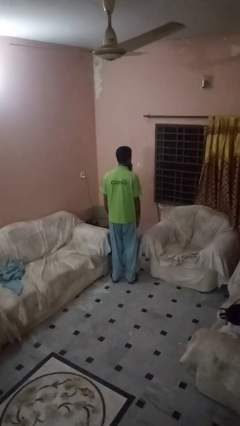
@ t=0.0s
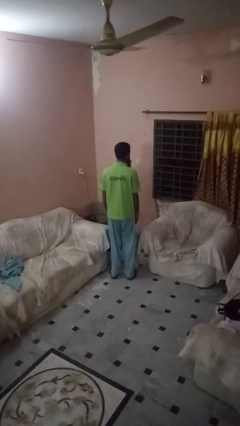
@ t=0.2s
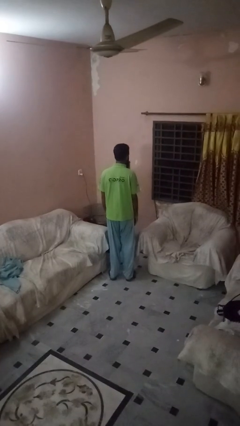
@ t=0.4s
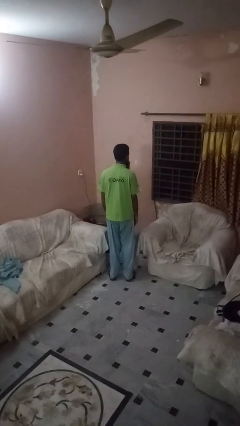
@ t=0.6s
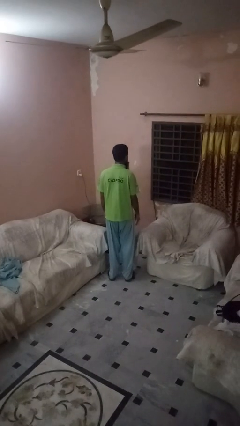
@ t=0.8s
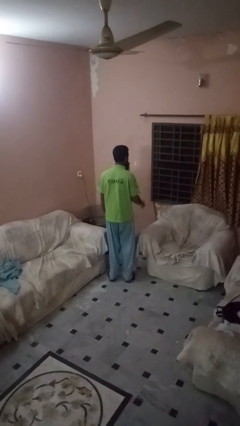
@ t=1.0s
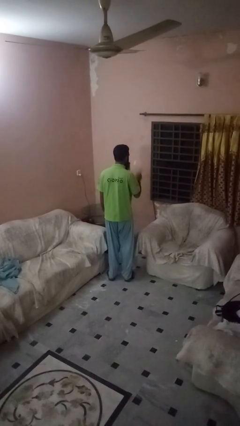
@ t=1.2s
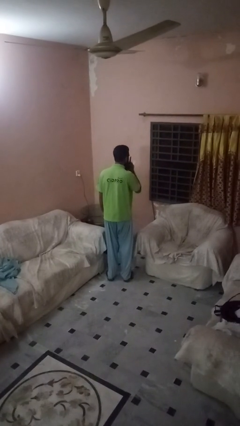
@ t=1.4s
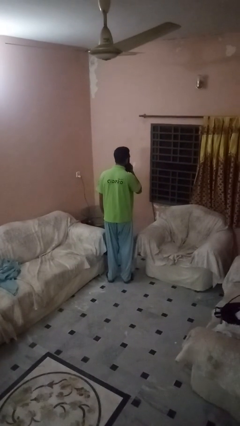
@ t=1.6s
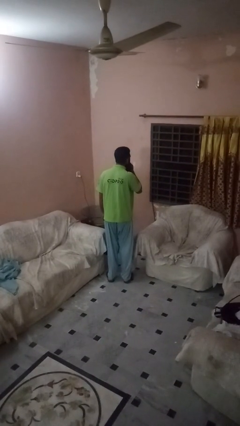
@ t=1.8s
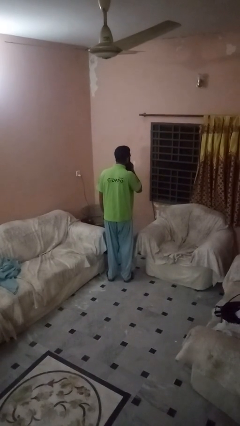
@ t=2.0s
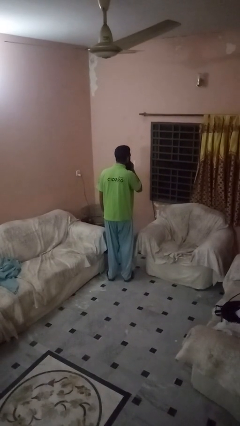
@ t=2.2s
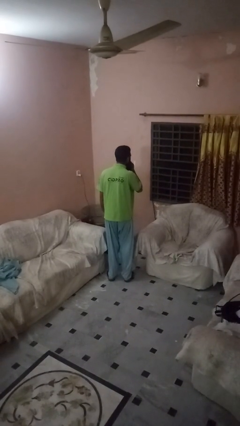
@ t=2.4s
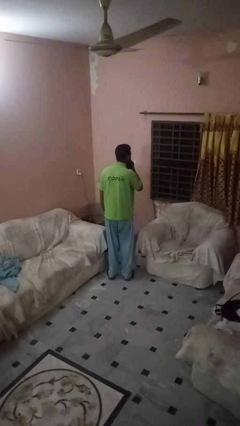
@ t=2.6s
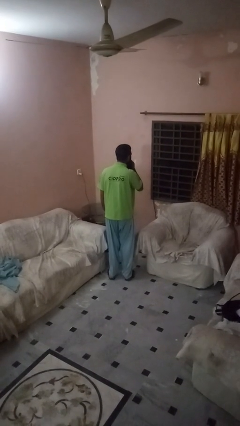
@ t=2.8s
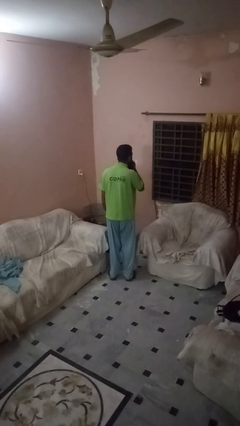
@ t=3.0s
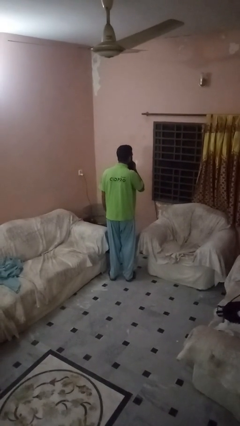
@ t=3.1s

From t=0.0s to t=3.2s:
person gestures be quiet

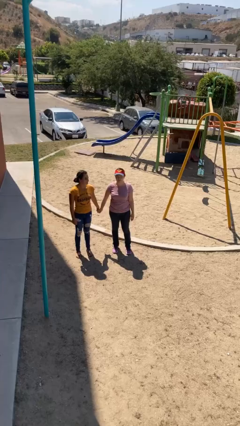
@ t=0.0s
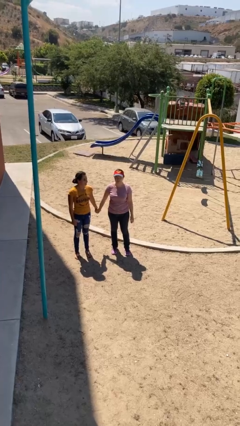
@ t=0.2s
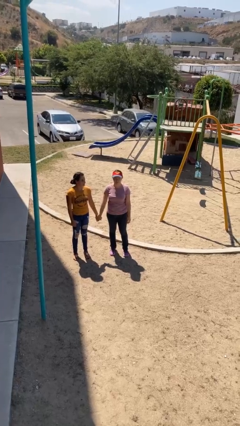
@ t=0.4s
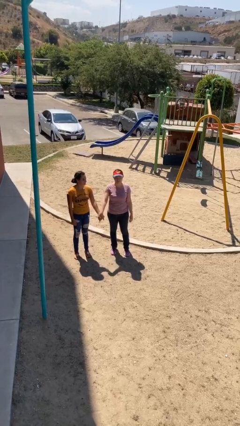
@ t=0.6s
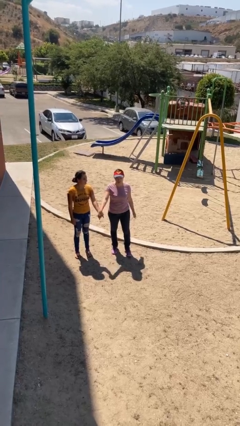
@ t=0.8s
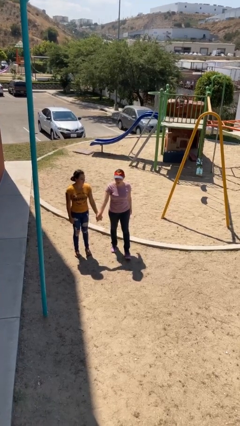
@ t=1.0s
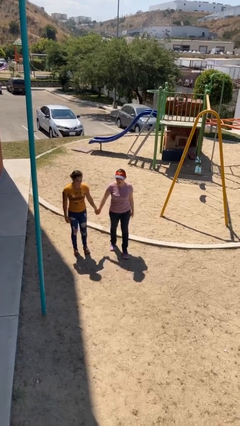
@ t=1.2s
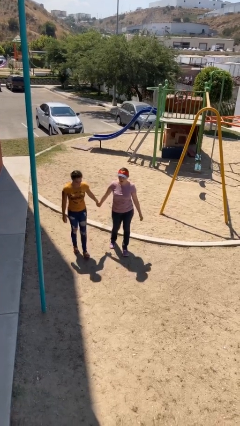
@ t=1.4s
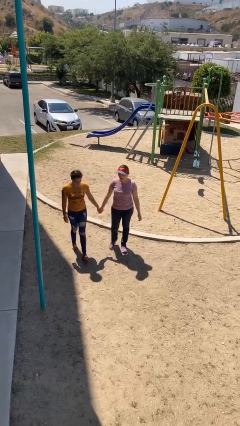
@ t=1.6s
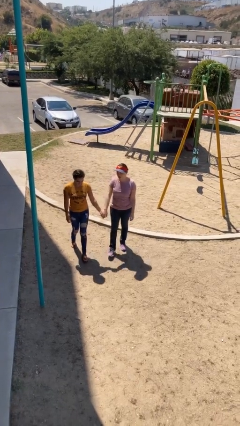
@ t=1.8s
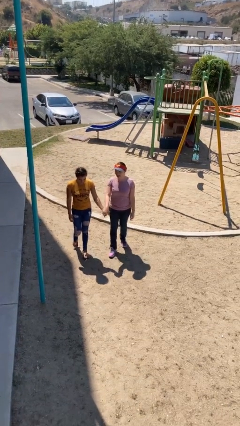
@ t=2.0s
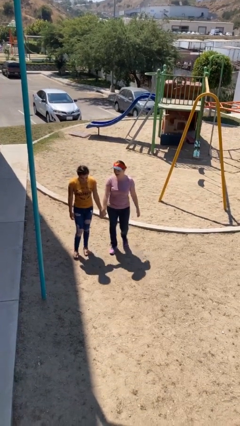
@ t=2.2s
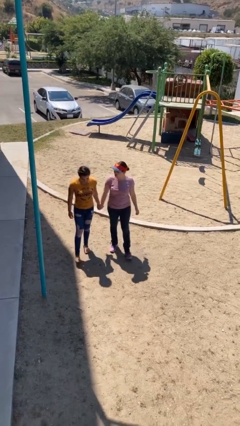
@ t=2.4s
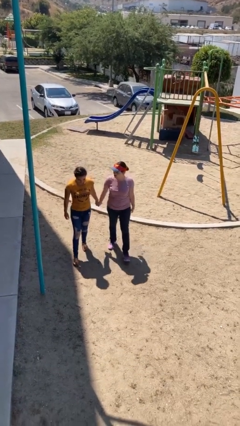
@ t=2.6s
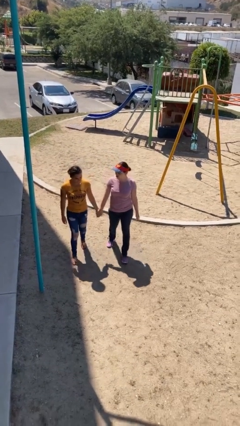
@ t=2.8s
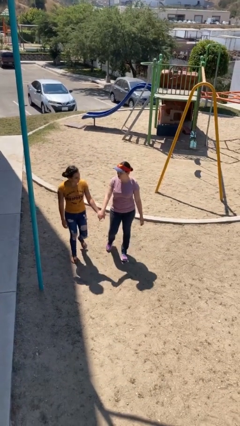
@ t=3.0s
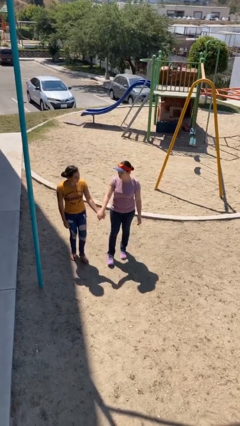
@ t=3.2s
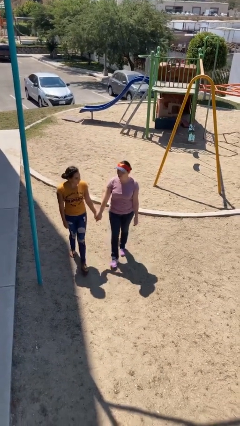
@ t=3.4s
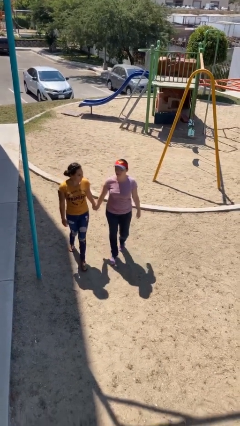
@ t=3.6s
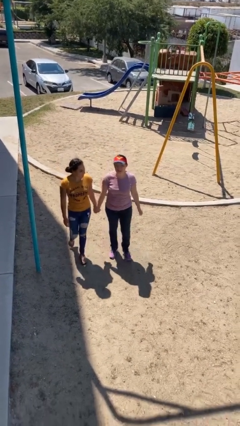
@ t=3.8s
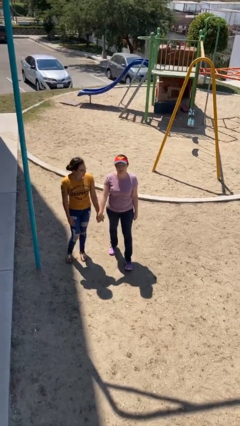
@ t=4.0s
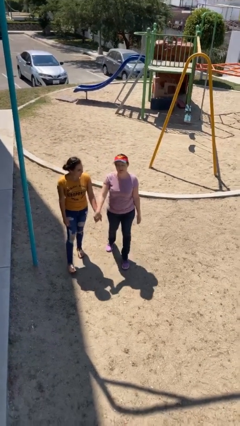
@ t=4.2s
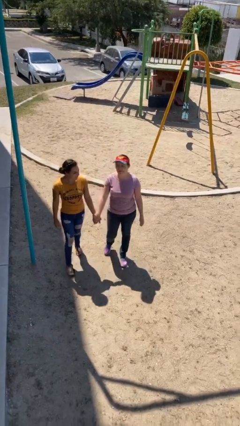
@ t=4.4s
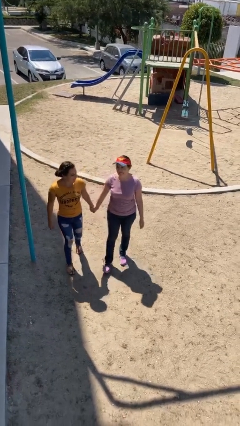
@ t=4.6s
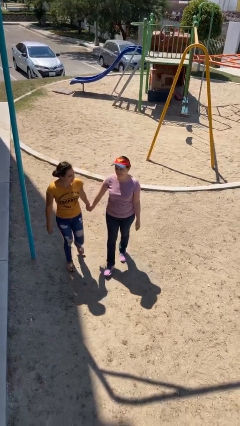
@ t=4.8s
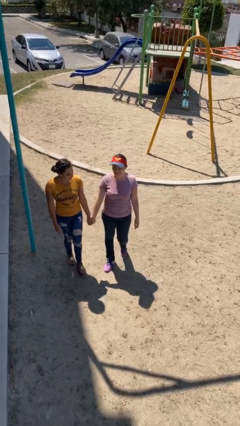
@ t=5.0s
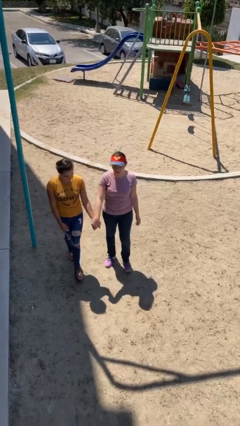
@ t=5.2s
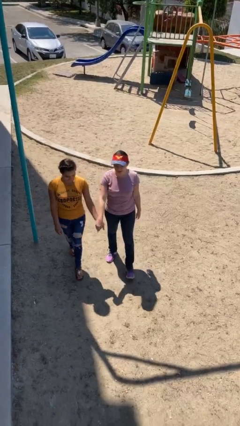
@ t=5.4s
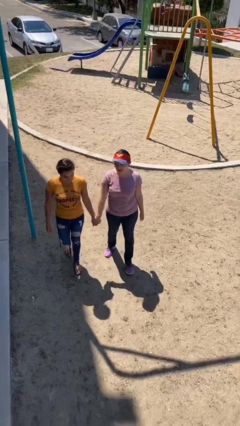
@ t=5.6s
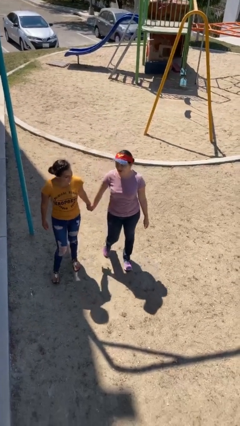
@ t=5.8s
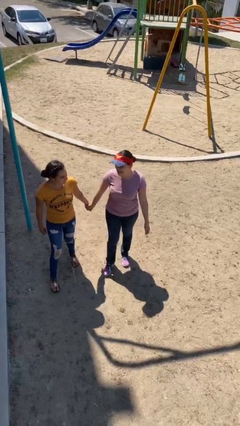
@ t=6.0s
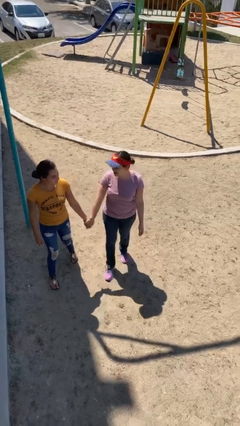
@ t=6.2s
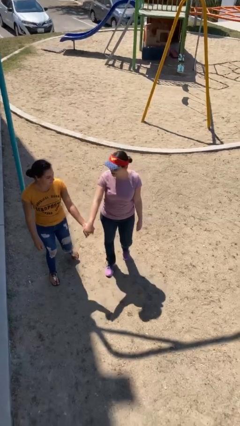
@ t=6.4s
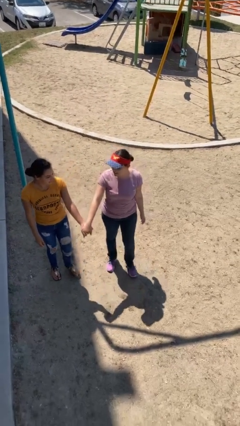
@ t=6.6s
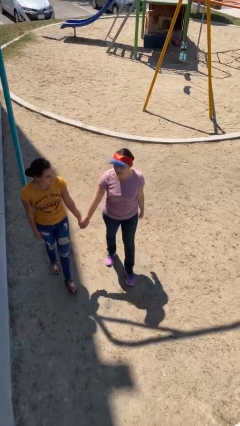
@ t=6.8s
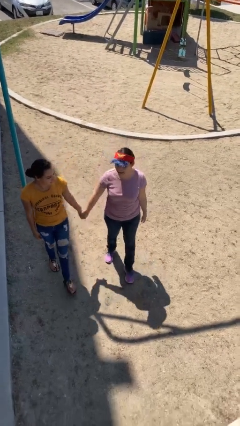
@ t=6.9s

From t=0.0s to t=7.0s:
person holds hand

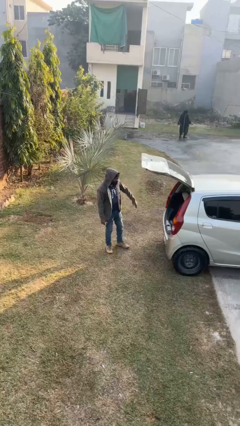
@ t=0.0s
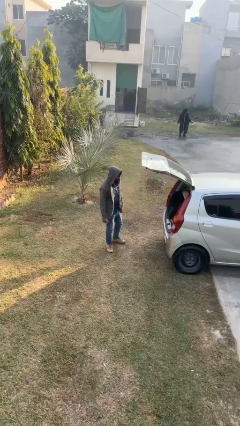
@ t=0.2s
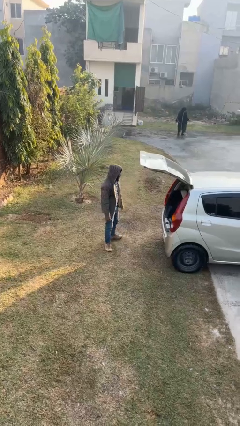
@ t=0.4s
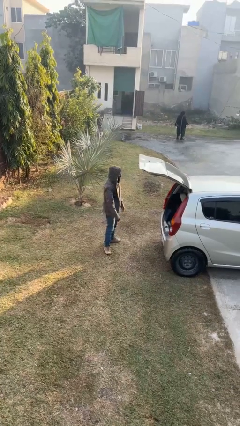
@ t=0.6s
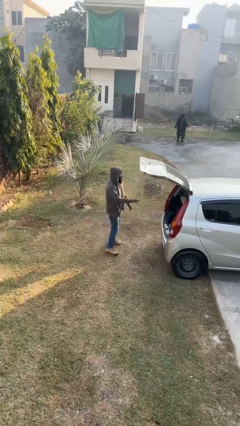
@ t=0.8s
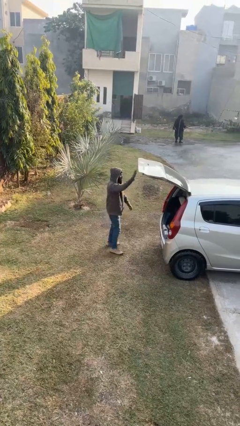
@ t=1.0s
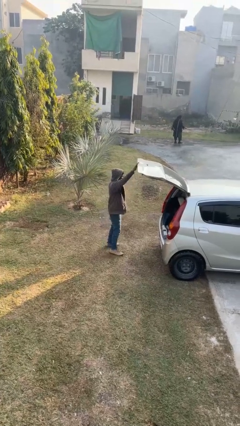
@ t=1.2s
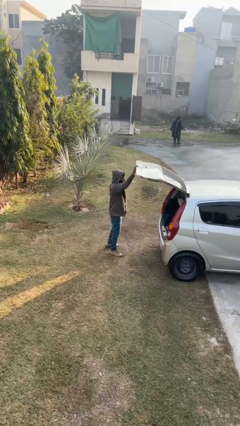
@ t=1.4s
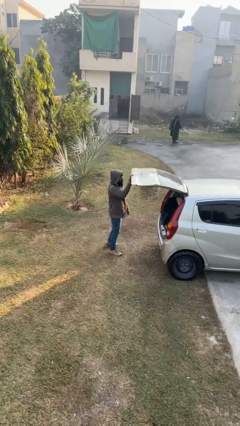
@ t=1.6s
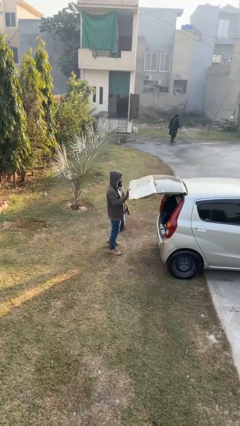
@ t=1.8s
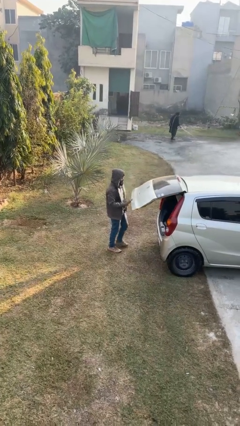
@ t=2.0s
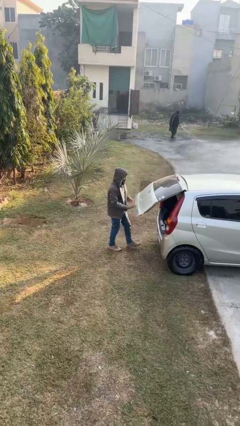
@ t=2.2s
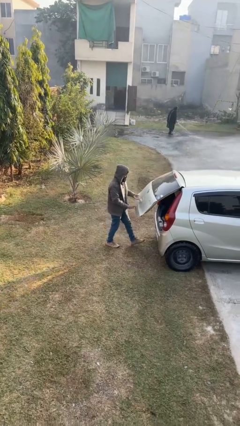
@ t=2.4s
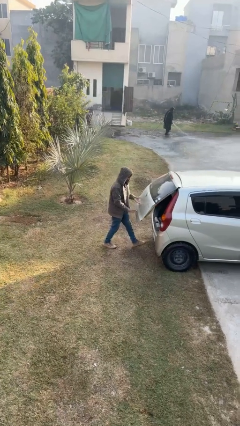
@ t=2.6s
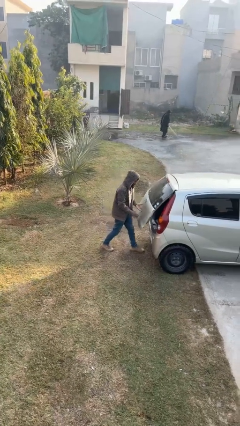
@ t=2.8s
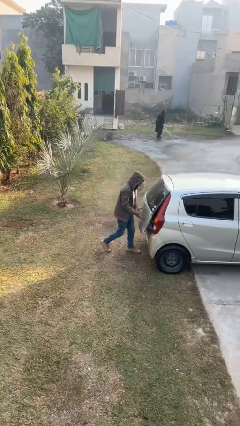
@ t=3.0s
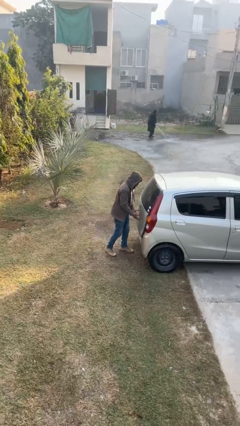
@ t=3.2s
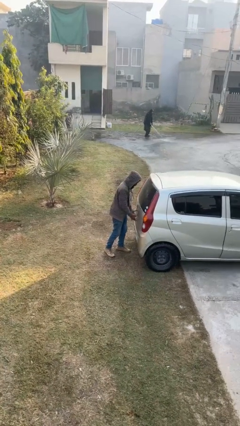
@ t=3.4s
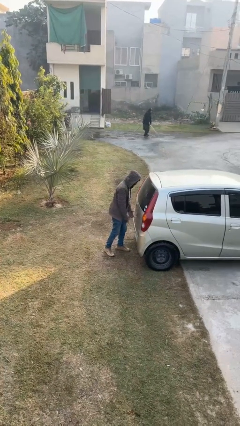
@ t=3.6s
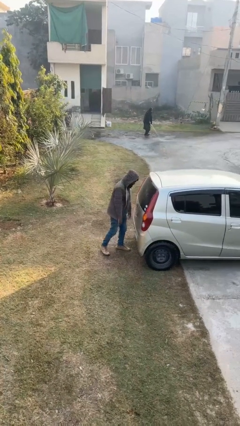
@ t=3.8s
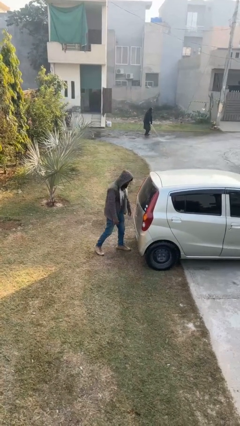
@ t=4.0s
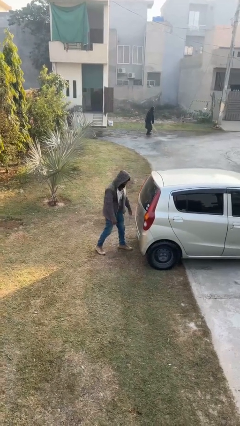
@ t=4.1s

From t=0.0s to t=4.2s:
person closes car trunk

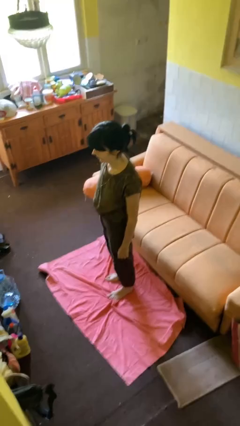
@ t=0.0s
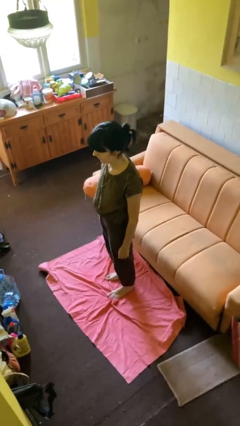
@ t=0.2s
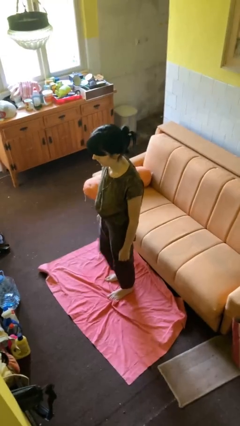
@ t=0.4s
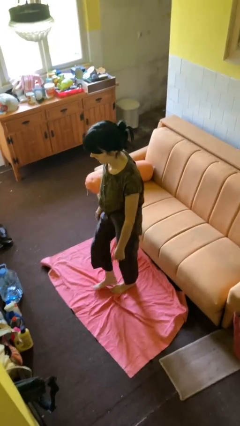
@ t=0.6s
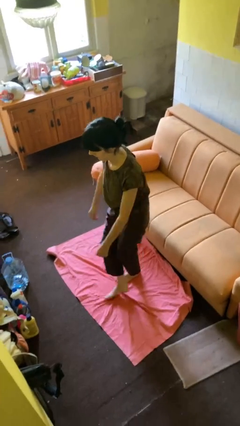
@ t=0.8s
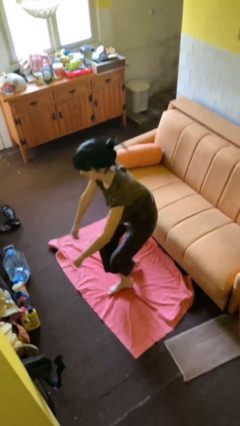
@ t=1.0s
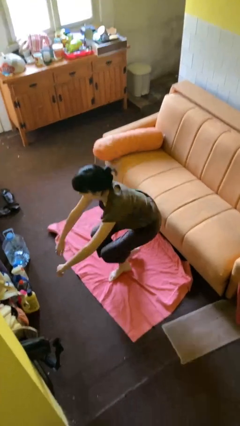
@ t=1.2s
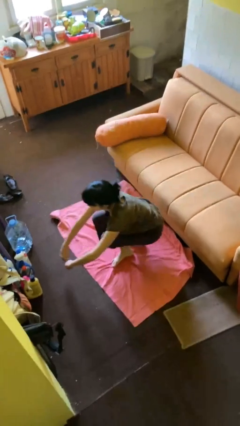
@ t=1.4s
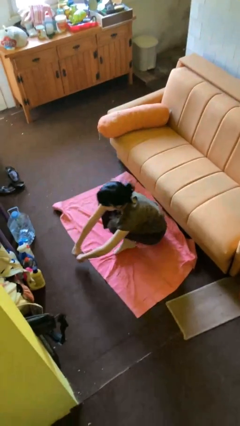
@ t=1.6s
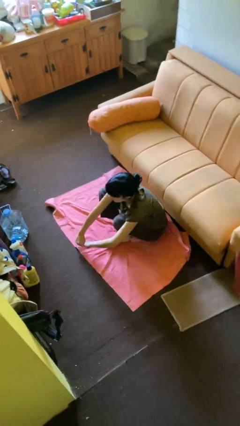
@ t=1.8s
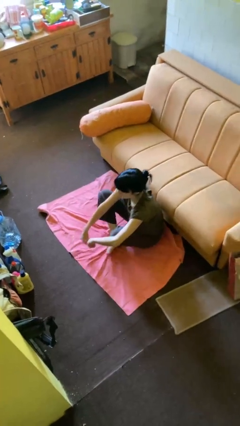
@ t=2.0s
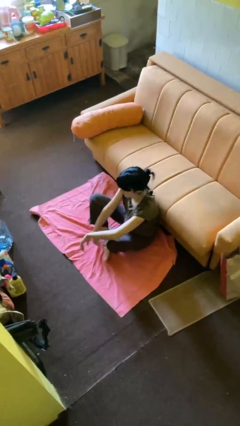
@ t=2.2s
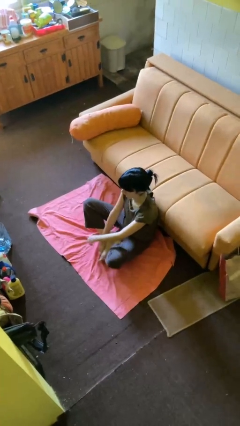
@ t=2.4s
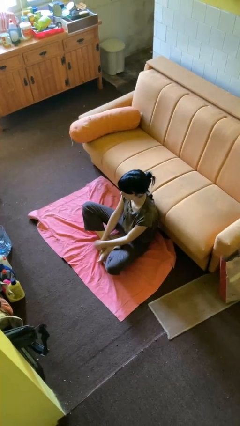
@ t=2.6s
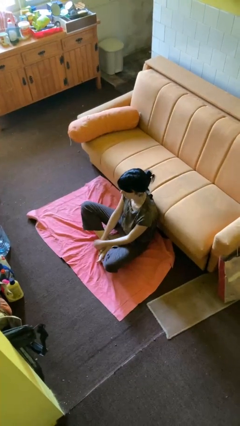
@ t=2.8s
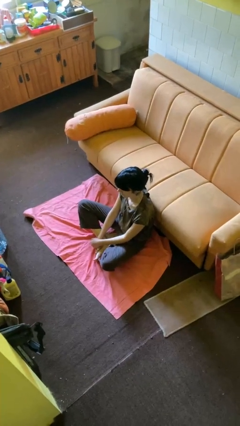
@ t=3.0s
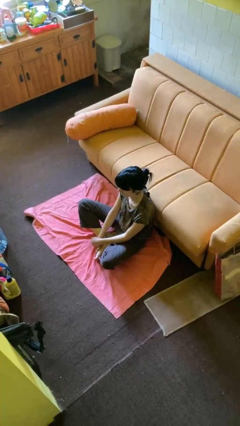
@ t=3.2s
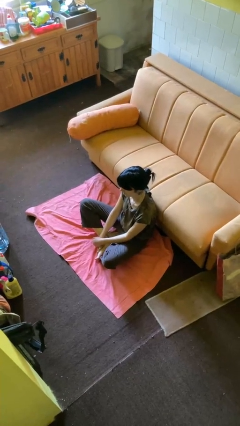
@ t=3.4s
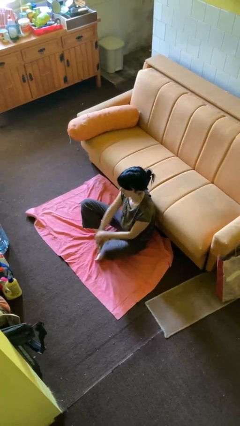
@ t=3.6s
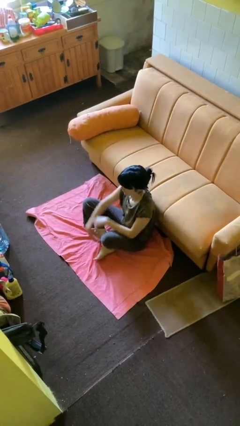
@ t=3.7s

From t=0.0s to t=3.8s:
person sits crisscross
